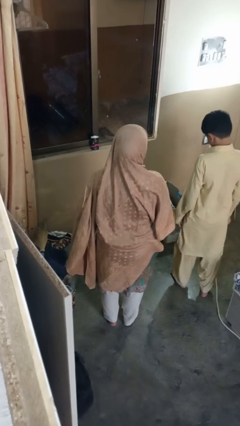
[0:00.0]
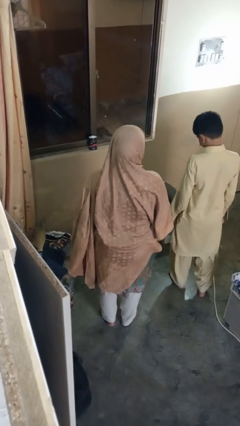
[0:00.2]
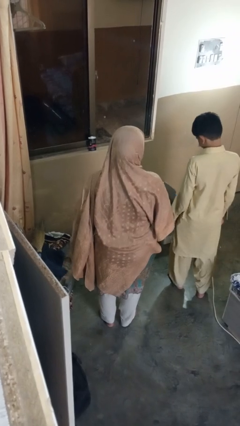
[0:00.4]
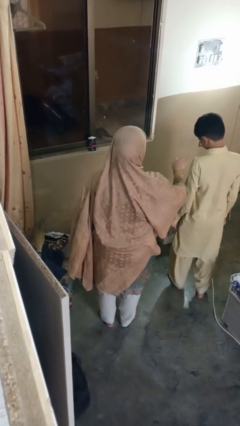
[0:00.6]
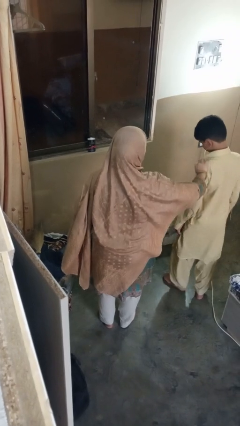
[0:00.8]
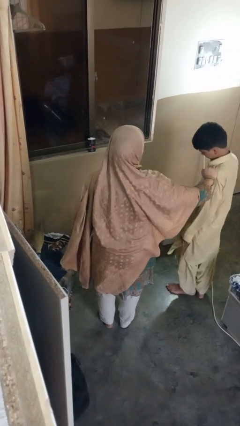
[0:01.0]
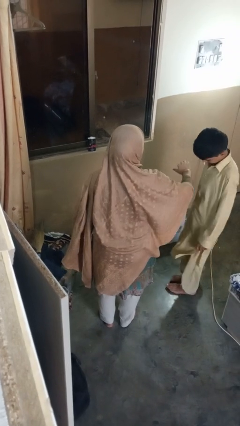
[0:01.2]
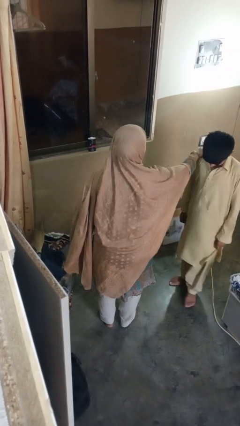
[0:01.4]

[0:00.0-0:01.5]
person grabs person by shoulder

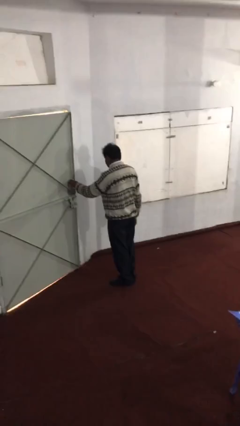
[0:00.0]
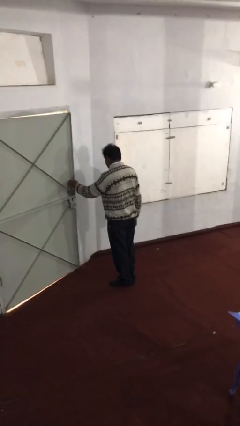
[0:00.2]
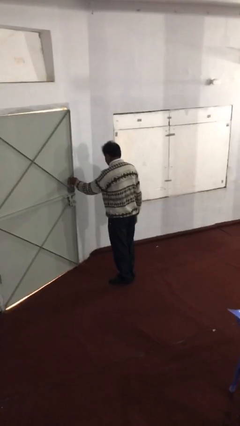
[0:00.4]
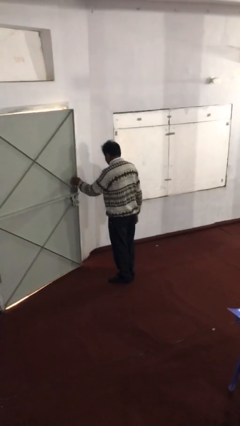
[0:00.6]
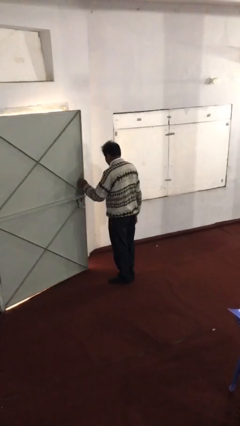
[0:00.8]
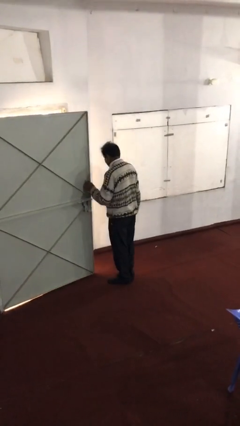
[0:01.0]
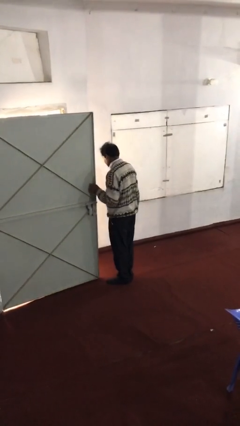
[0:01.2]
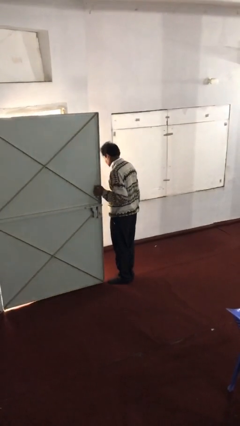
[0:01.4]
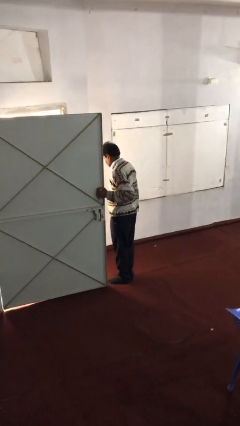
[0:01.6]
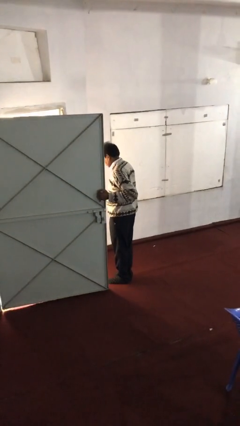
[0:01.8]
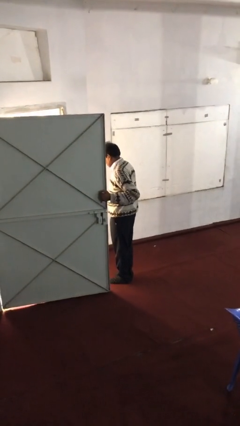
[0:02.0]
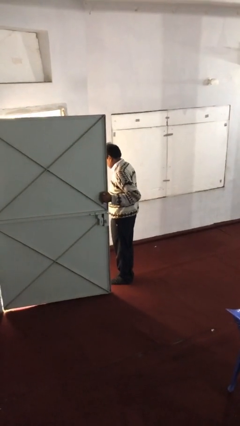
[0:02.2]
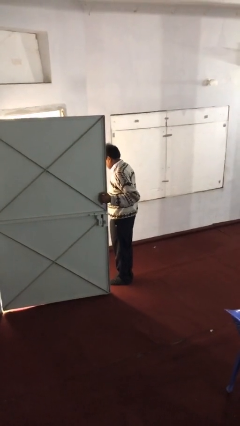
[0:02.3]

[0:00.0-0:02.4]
person opens facility door

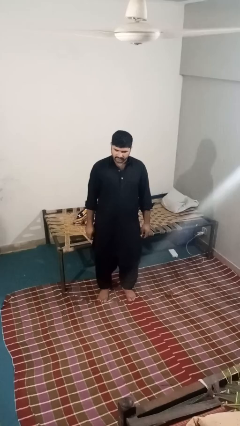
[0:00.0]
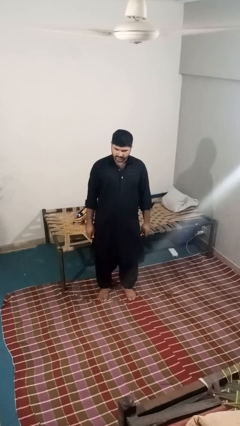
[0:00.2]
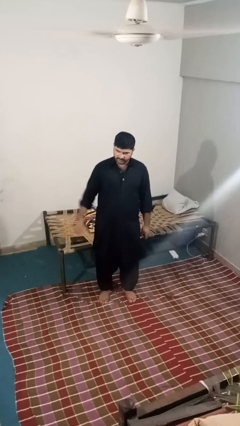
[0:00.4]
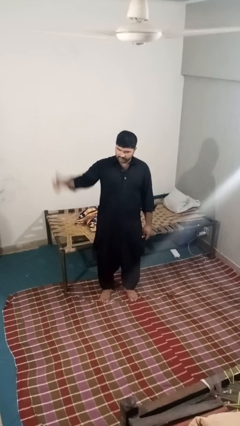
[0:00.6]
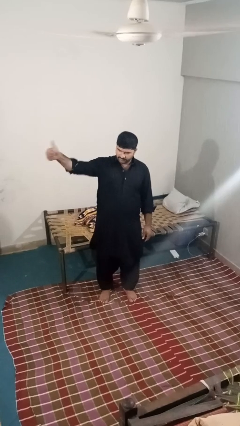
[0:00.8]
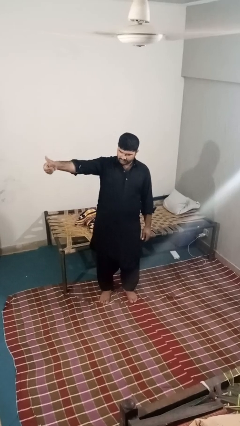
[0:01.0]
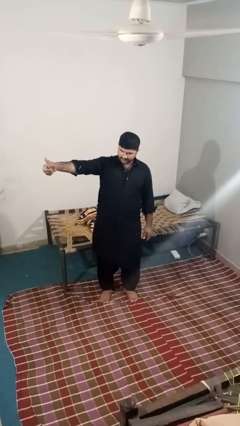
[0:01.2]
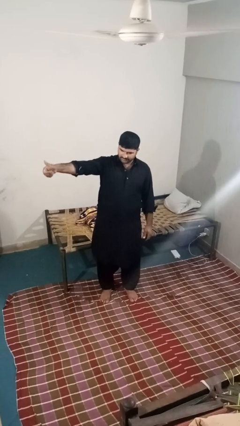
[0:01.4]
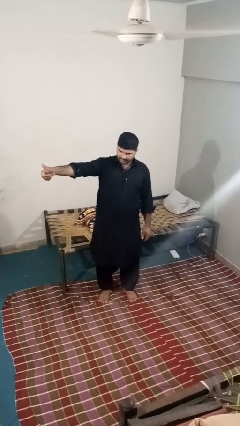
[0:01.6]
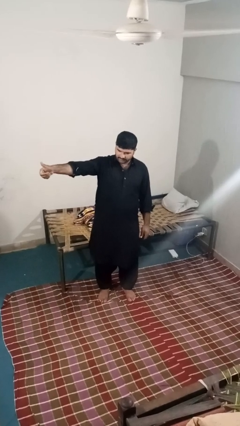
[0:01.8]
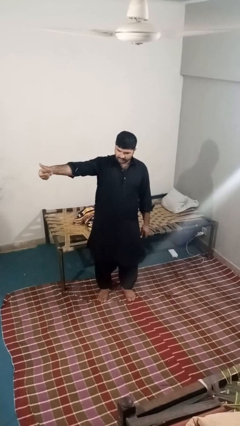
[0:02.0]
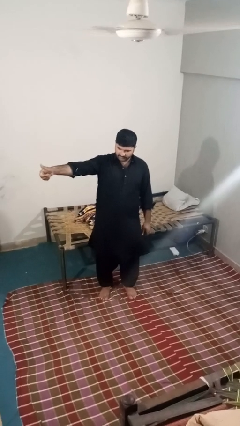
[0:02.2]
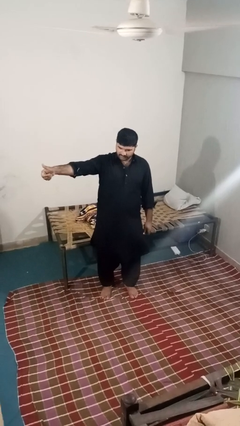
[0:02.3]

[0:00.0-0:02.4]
person gestures thumbs up

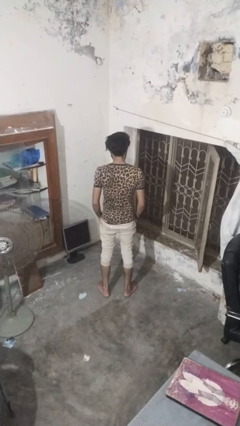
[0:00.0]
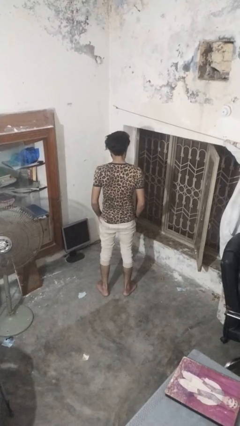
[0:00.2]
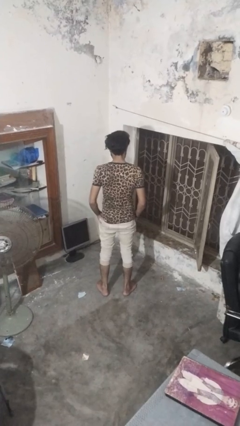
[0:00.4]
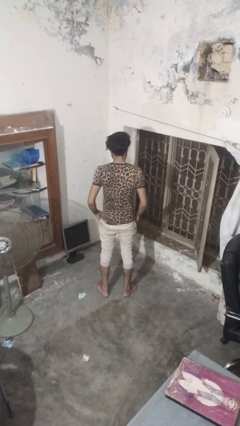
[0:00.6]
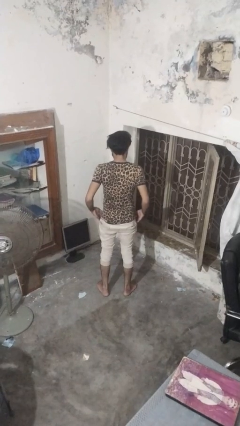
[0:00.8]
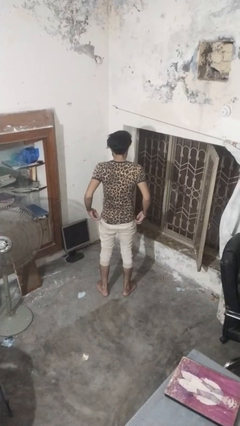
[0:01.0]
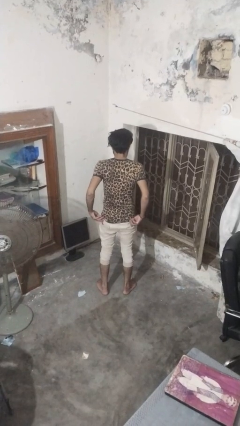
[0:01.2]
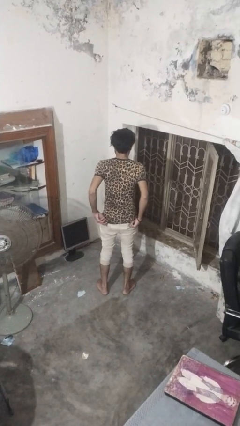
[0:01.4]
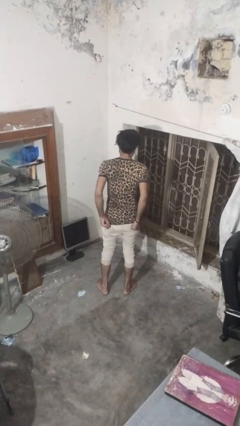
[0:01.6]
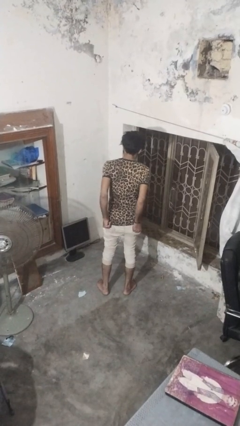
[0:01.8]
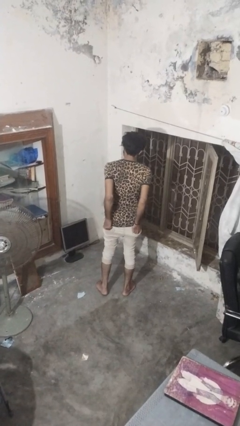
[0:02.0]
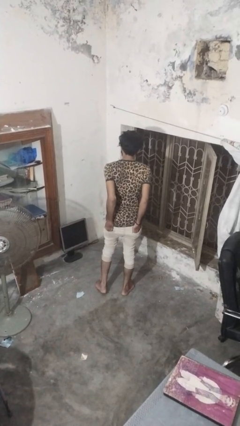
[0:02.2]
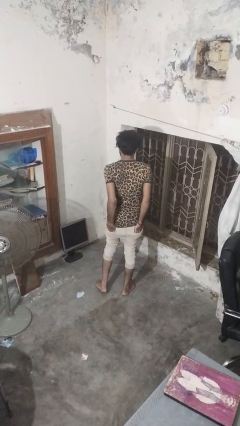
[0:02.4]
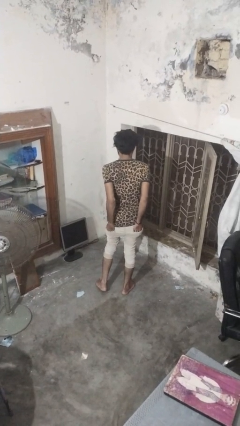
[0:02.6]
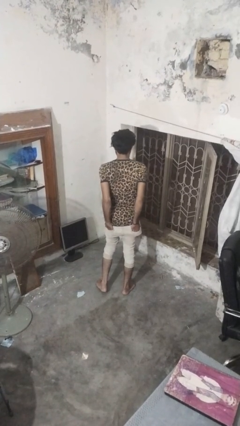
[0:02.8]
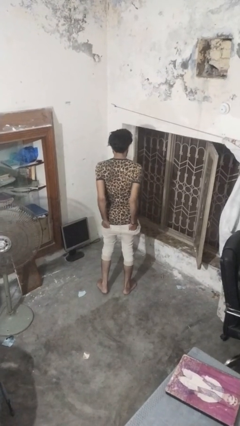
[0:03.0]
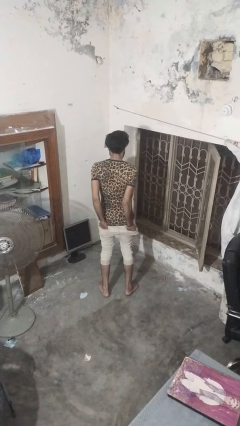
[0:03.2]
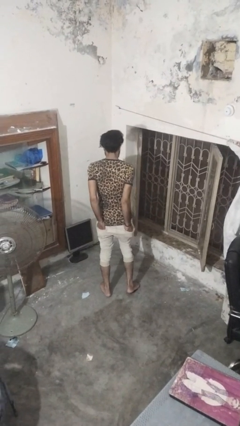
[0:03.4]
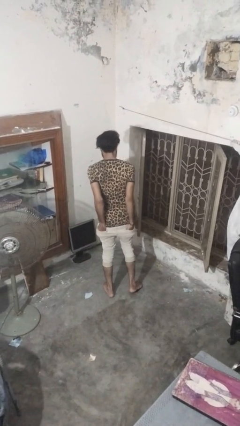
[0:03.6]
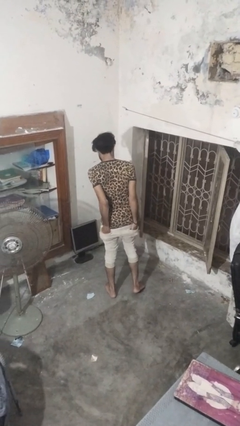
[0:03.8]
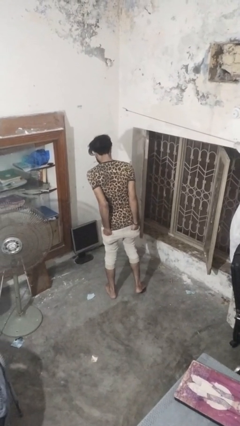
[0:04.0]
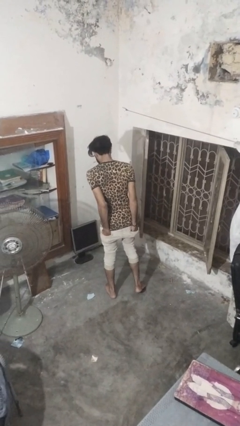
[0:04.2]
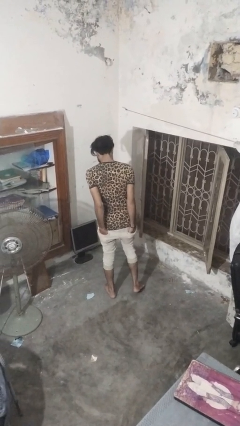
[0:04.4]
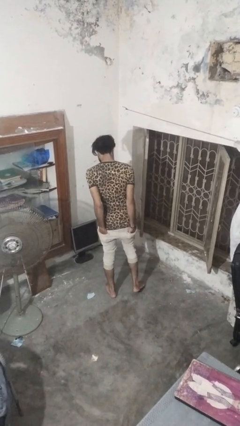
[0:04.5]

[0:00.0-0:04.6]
person puts hands in back pockets

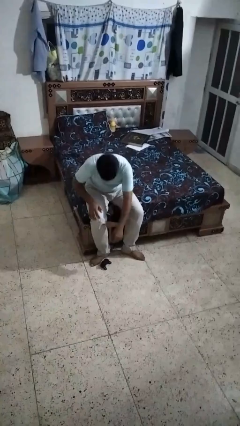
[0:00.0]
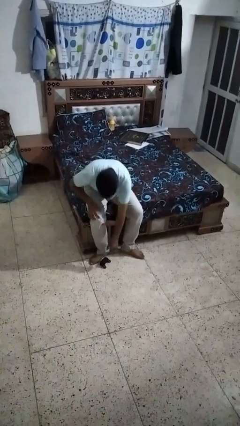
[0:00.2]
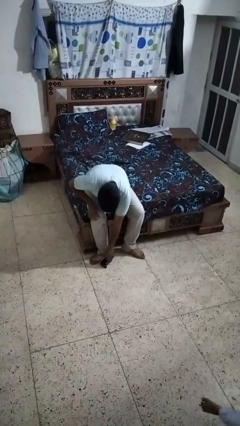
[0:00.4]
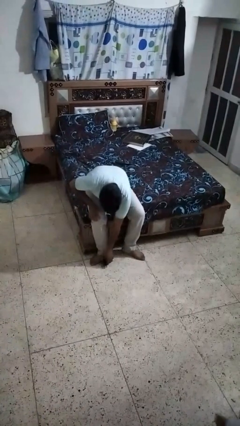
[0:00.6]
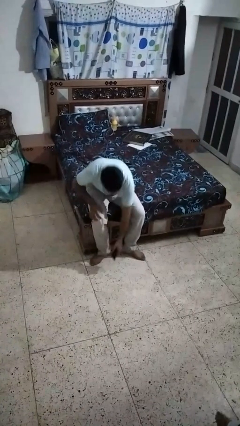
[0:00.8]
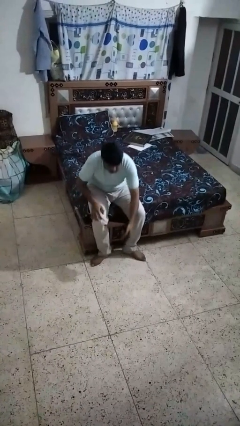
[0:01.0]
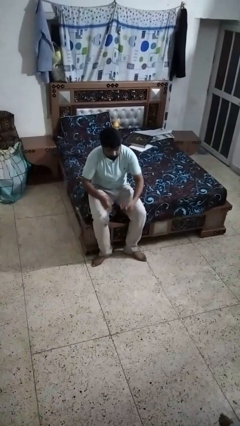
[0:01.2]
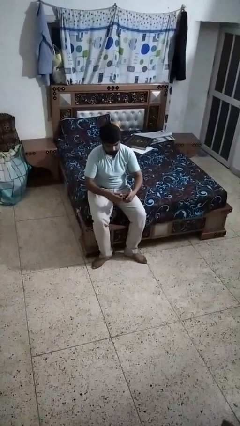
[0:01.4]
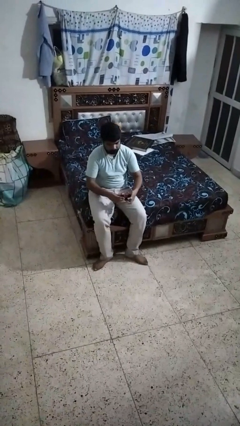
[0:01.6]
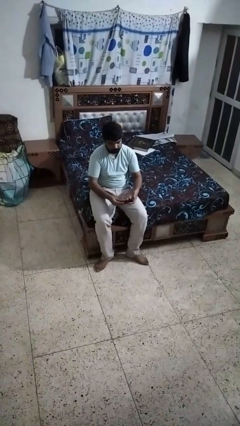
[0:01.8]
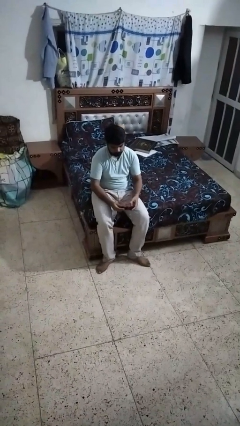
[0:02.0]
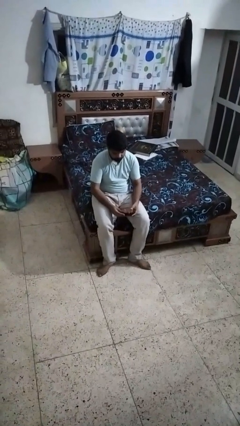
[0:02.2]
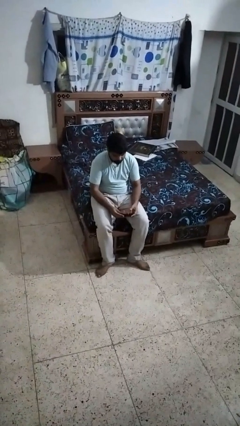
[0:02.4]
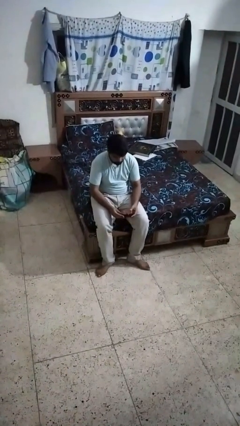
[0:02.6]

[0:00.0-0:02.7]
person picks up object from floor

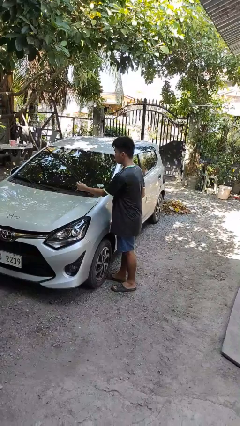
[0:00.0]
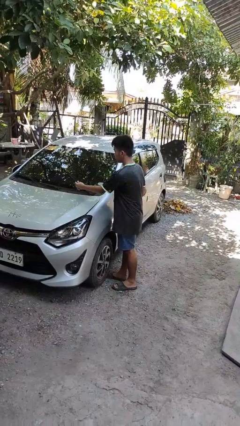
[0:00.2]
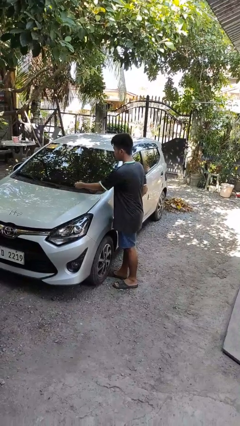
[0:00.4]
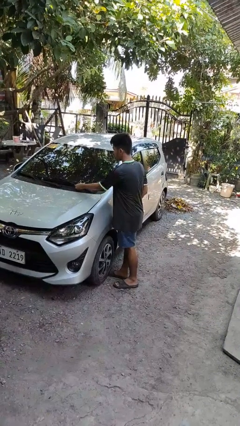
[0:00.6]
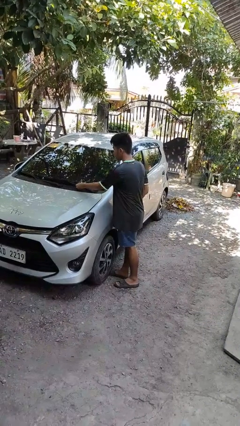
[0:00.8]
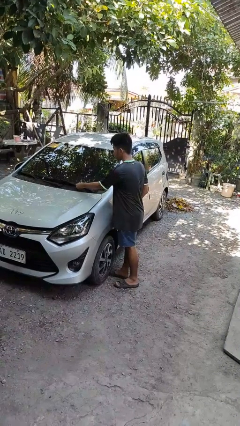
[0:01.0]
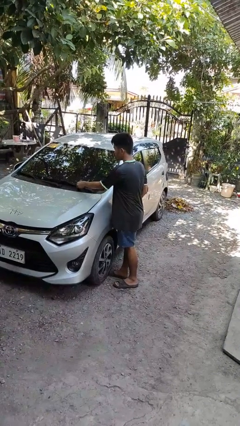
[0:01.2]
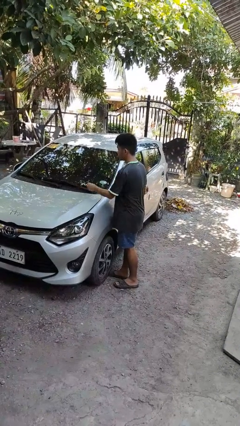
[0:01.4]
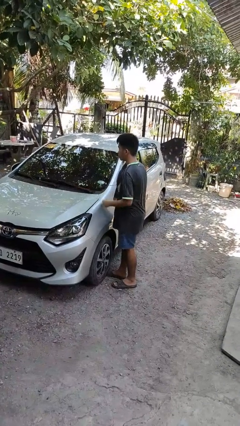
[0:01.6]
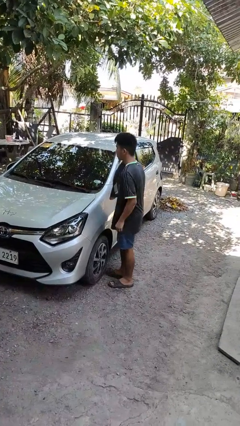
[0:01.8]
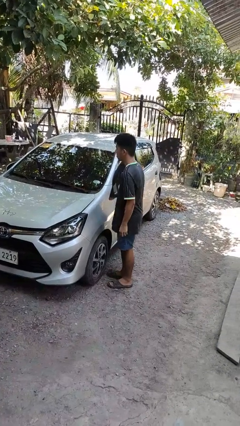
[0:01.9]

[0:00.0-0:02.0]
person flips down car wipers

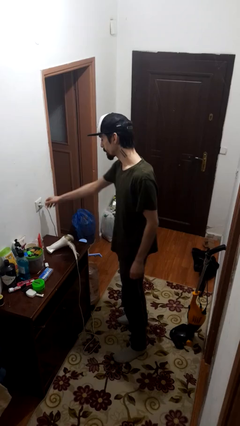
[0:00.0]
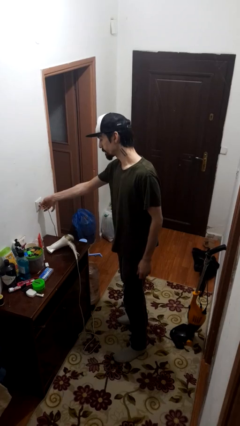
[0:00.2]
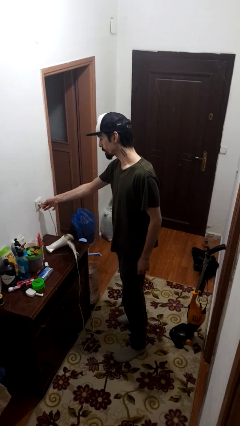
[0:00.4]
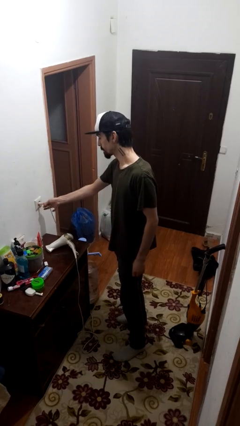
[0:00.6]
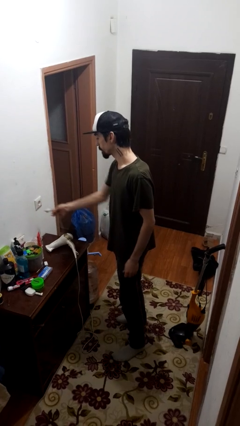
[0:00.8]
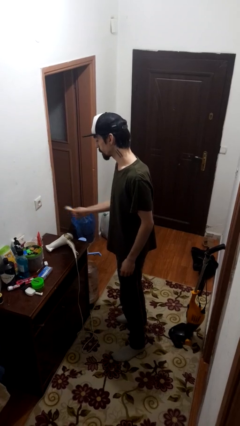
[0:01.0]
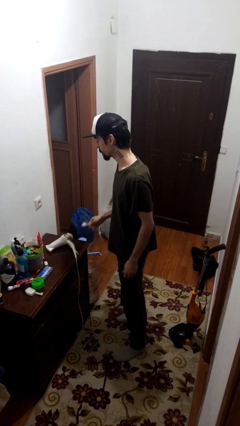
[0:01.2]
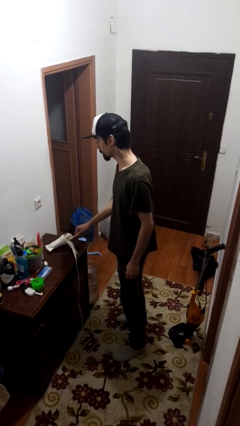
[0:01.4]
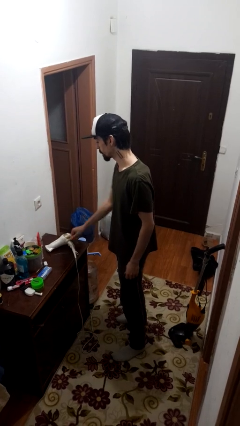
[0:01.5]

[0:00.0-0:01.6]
person unplugs from electrical socket
